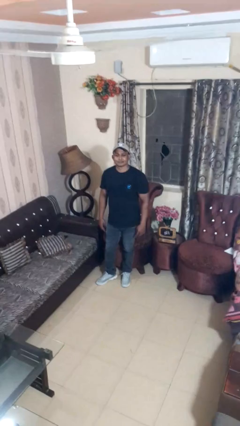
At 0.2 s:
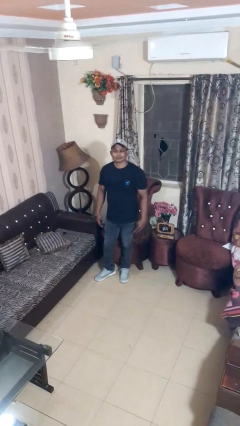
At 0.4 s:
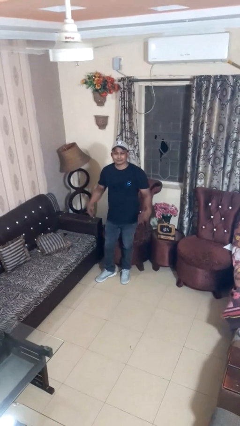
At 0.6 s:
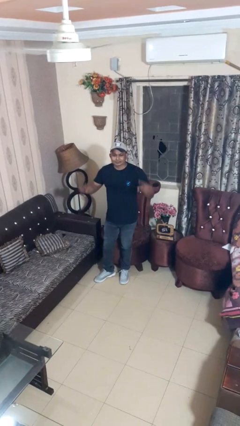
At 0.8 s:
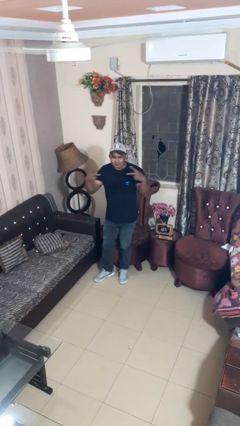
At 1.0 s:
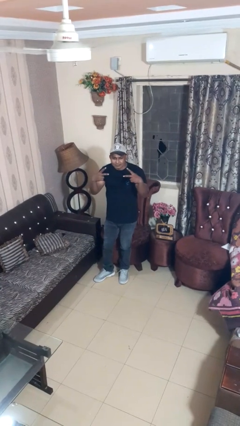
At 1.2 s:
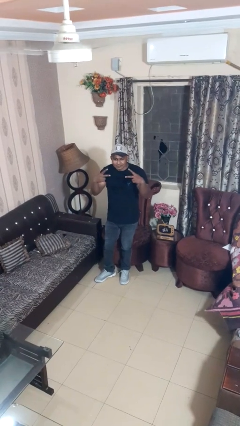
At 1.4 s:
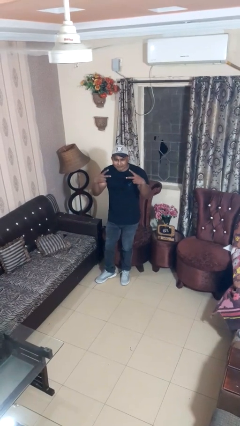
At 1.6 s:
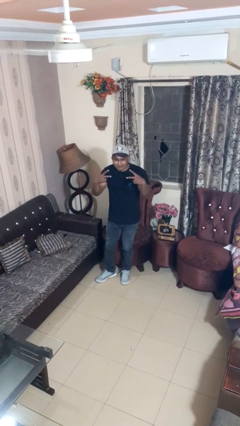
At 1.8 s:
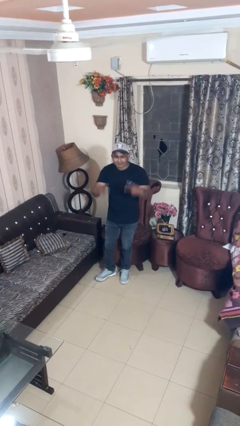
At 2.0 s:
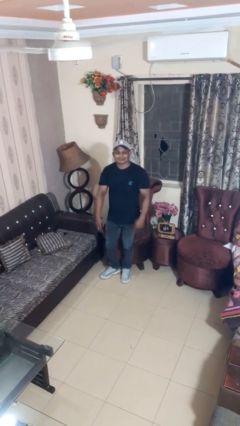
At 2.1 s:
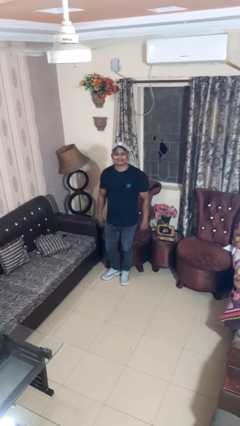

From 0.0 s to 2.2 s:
person gestures peace

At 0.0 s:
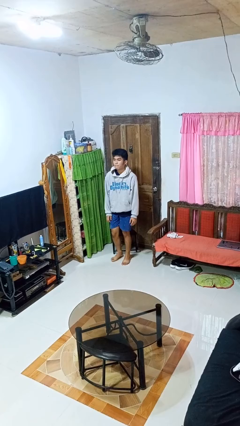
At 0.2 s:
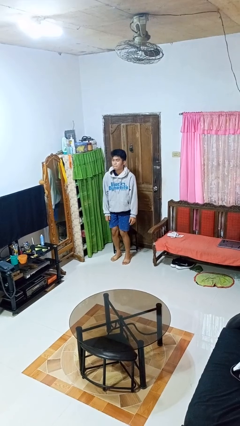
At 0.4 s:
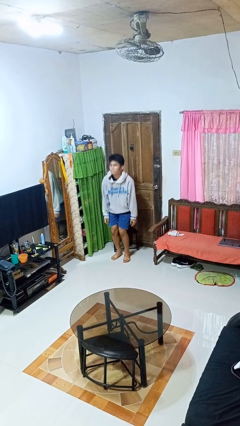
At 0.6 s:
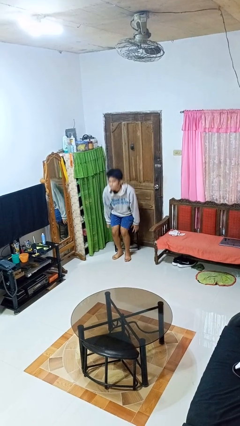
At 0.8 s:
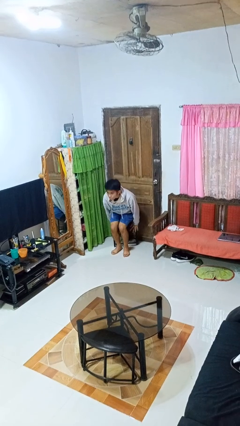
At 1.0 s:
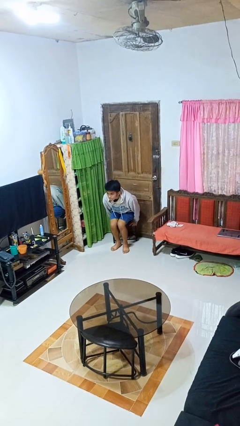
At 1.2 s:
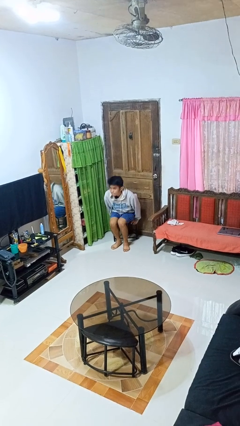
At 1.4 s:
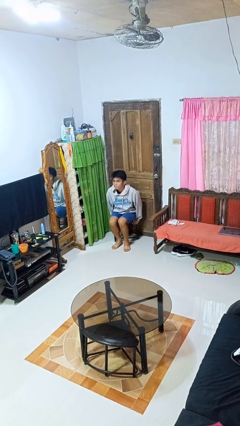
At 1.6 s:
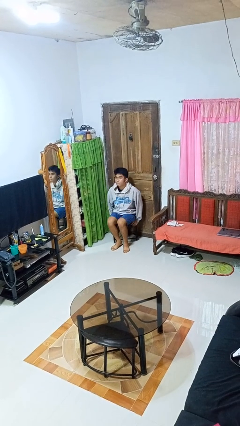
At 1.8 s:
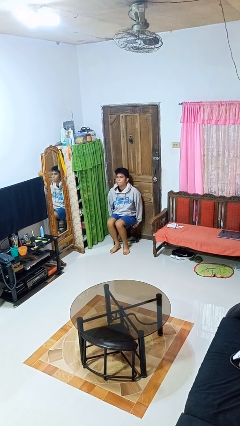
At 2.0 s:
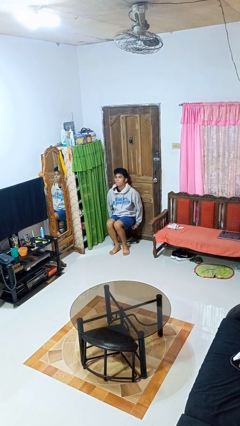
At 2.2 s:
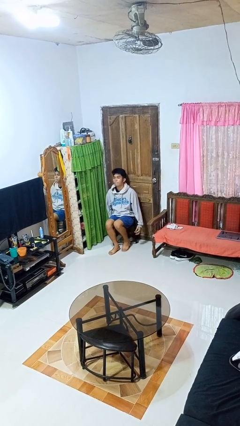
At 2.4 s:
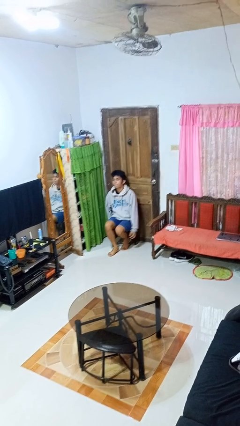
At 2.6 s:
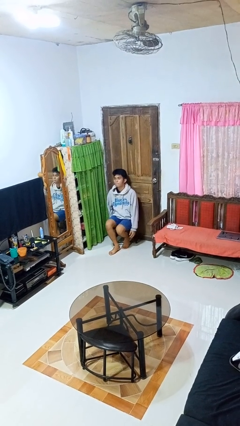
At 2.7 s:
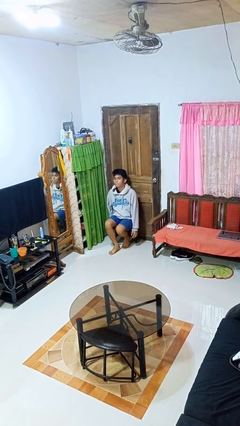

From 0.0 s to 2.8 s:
person sits down

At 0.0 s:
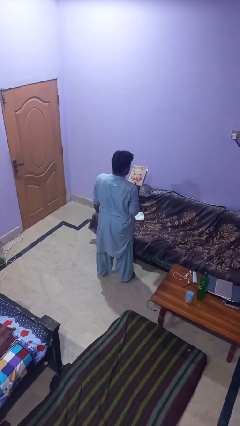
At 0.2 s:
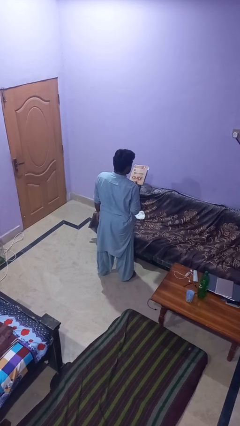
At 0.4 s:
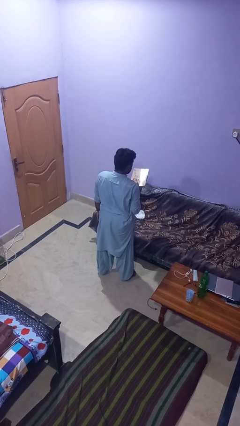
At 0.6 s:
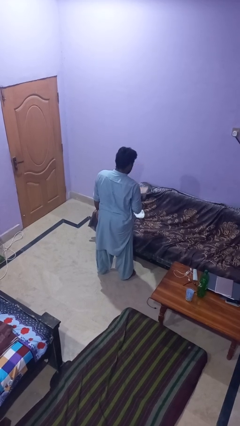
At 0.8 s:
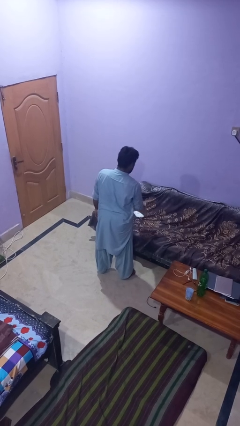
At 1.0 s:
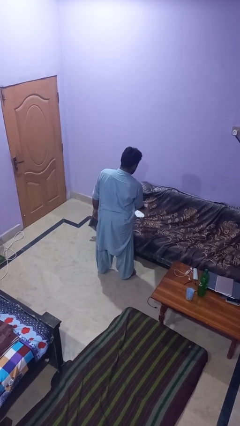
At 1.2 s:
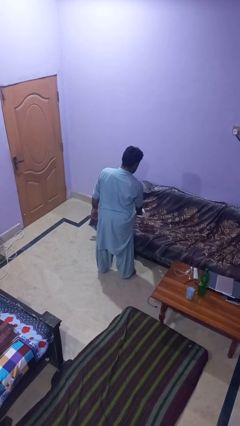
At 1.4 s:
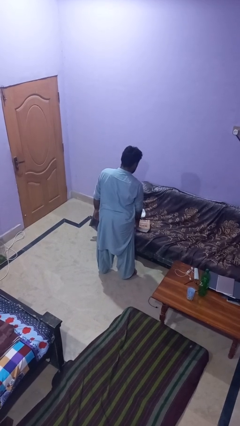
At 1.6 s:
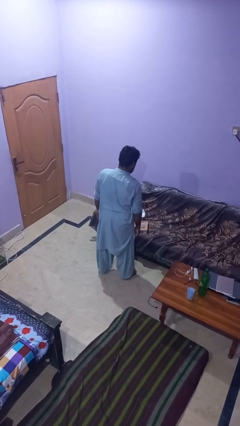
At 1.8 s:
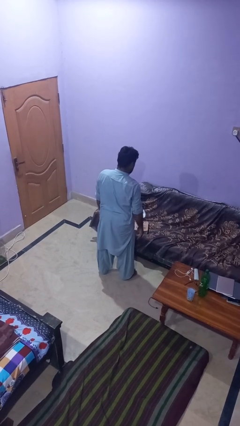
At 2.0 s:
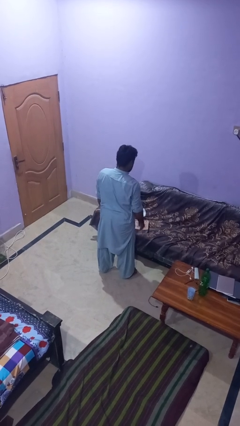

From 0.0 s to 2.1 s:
person puts down object on couch

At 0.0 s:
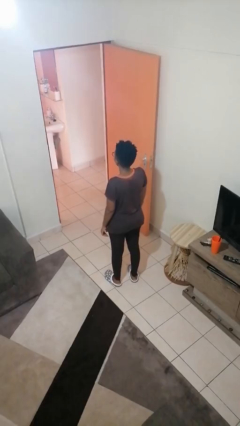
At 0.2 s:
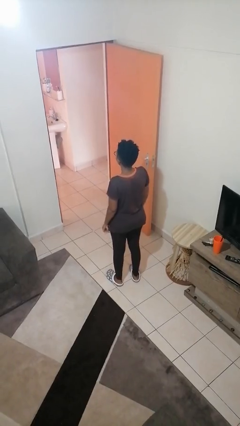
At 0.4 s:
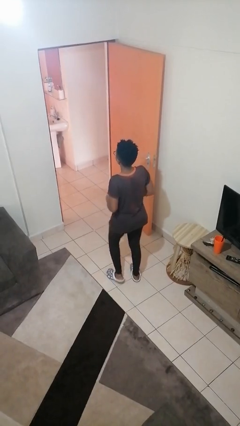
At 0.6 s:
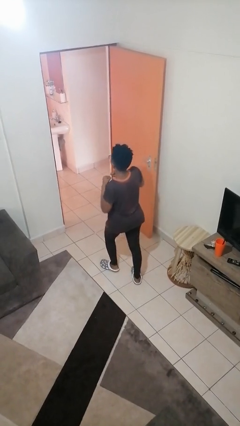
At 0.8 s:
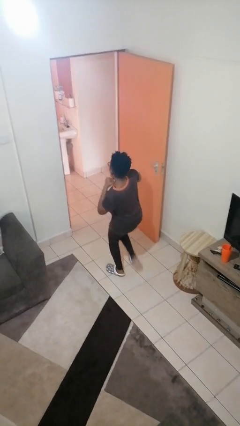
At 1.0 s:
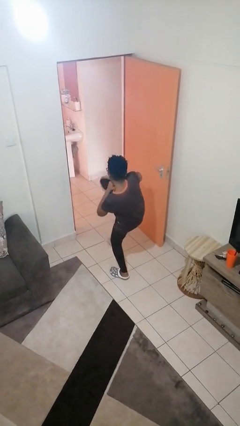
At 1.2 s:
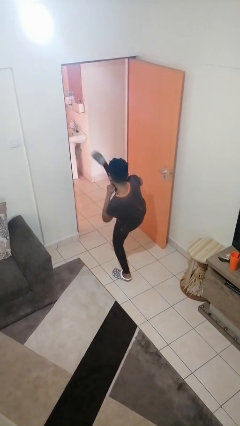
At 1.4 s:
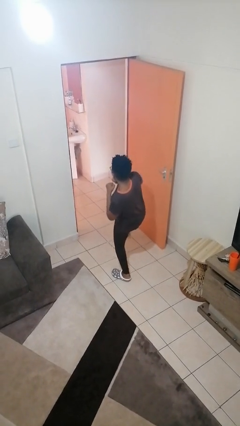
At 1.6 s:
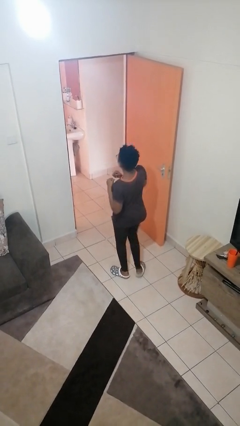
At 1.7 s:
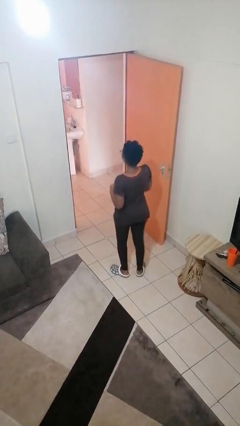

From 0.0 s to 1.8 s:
person karate kicks

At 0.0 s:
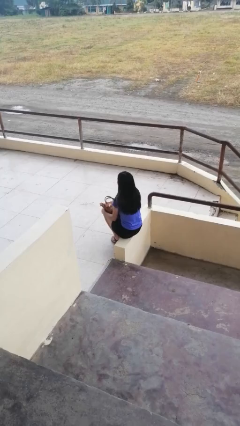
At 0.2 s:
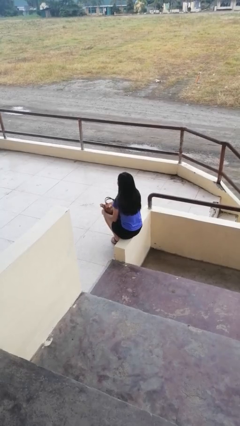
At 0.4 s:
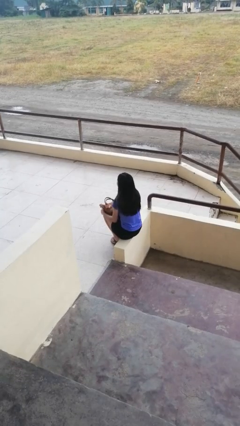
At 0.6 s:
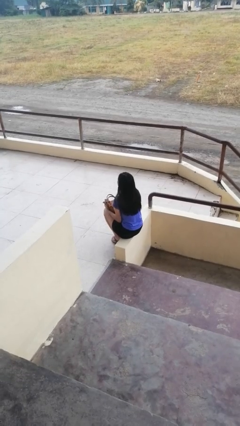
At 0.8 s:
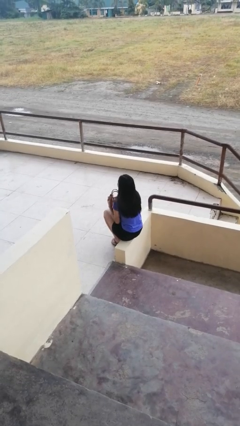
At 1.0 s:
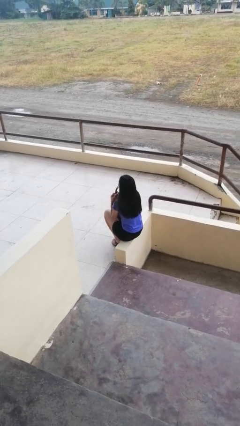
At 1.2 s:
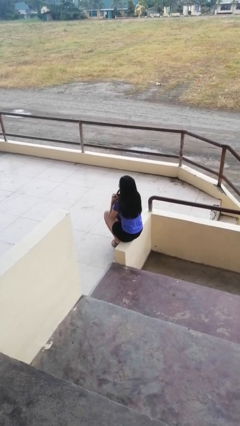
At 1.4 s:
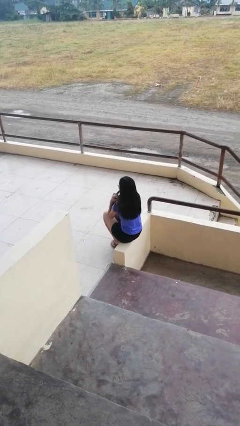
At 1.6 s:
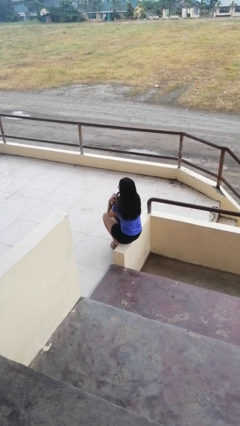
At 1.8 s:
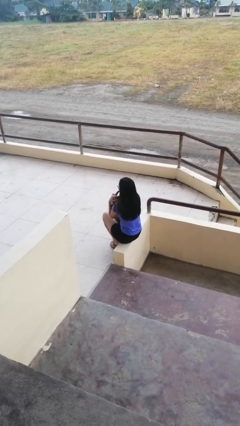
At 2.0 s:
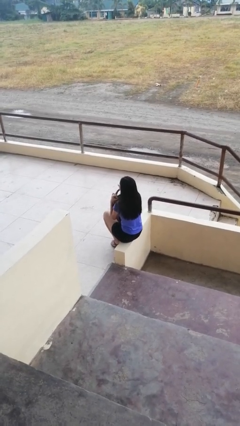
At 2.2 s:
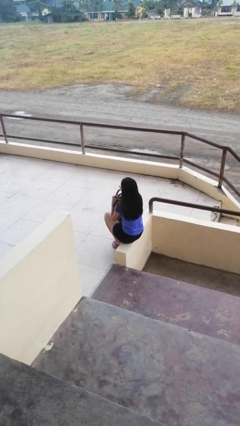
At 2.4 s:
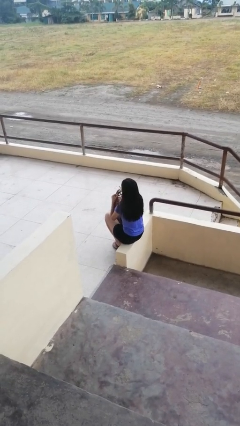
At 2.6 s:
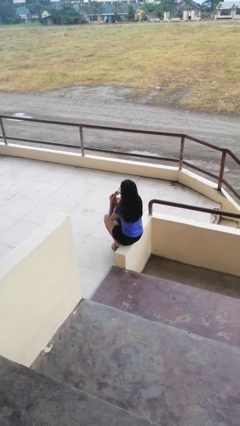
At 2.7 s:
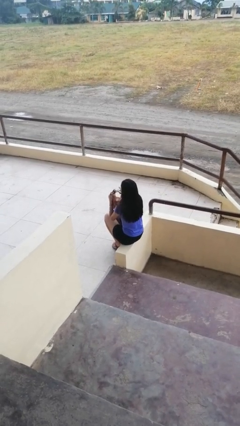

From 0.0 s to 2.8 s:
person squeezes object

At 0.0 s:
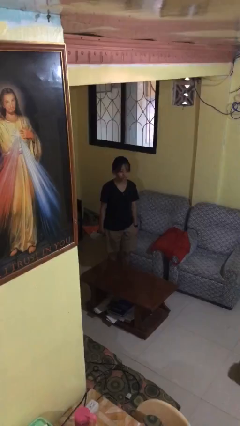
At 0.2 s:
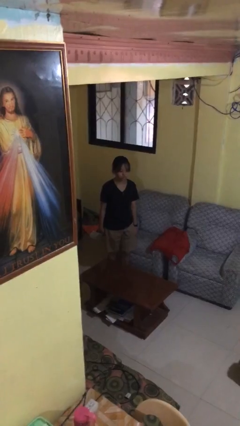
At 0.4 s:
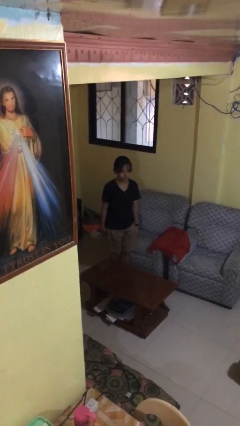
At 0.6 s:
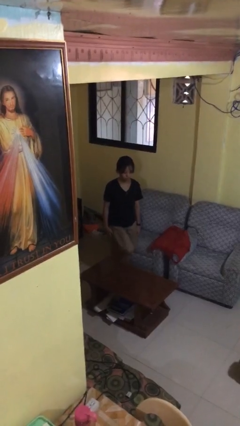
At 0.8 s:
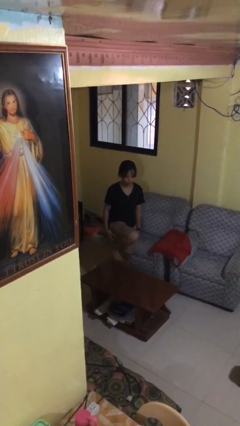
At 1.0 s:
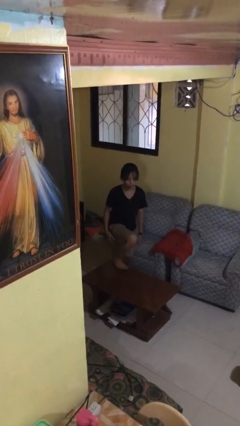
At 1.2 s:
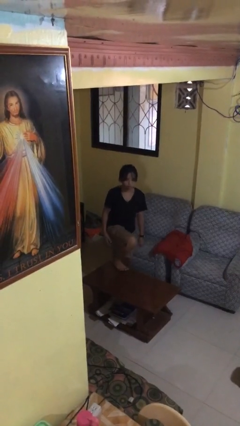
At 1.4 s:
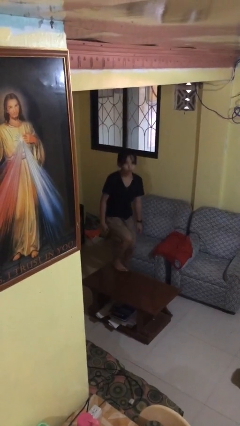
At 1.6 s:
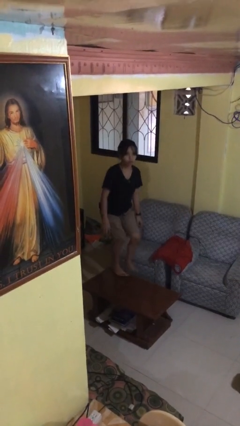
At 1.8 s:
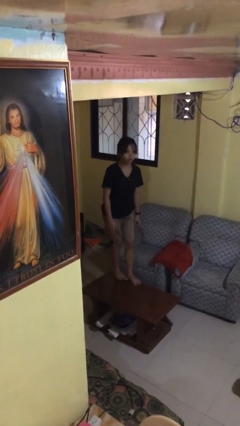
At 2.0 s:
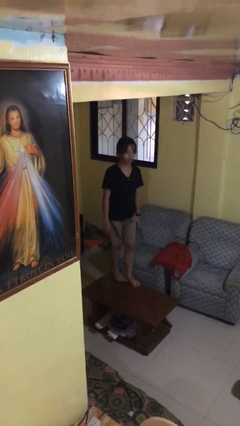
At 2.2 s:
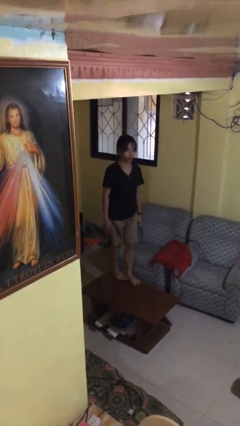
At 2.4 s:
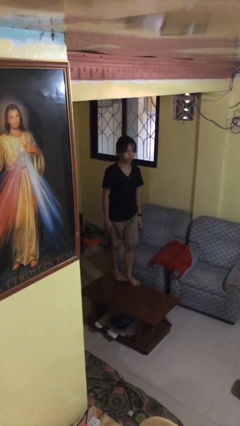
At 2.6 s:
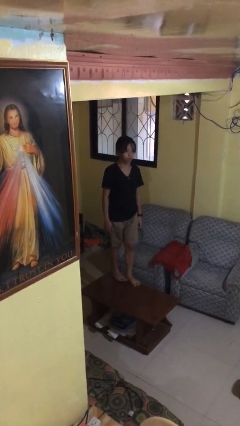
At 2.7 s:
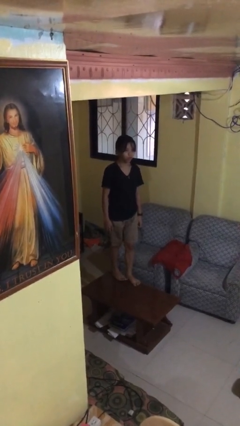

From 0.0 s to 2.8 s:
person climbs on table

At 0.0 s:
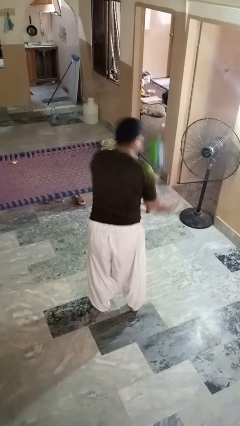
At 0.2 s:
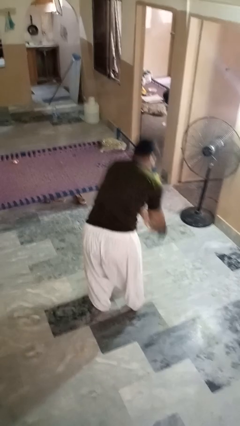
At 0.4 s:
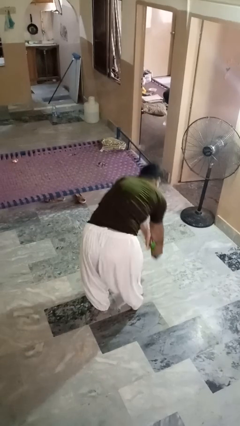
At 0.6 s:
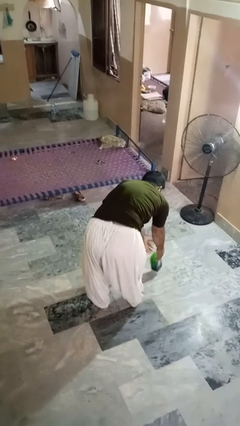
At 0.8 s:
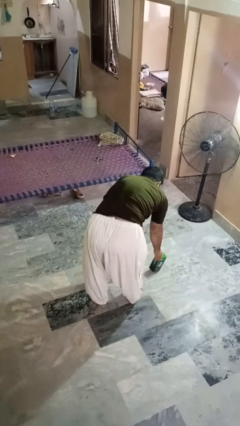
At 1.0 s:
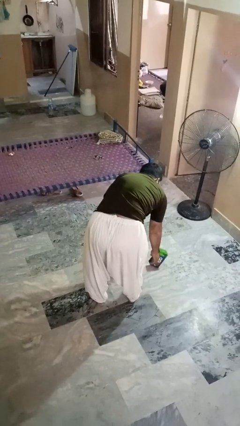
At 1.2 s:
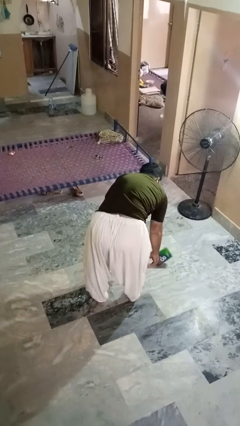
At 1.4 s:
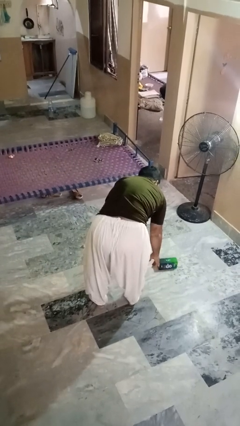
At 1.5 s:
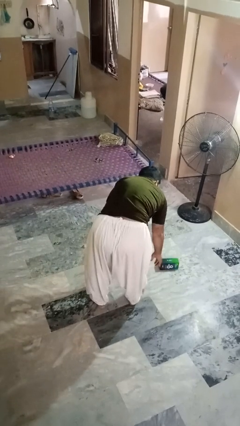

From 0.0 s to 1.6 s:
person catches dropped object

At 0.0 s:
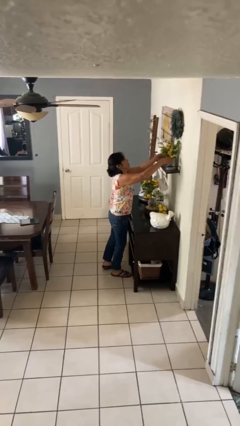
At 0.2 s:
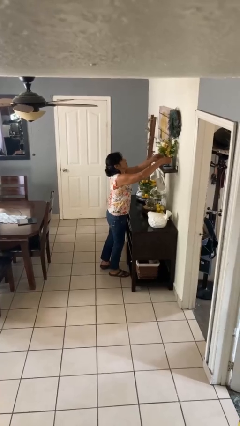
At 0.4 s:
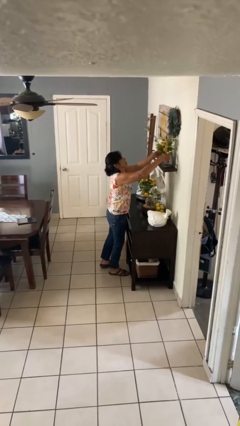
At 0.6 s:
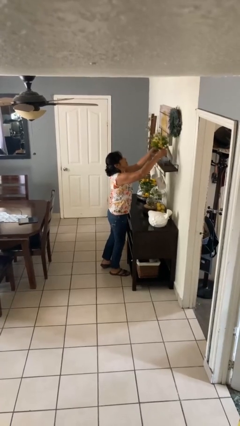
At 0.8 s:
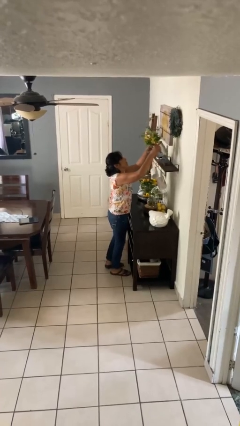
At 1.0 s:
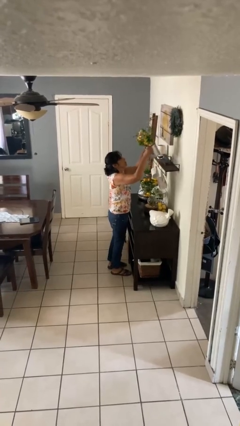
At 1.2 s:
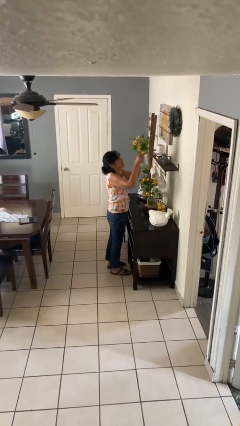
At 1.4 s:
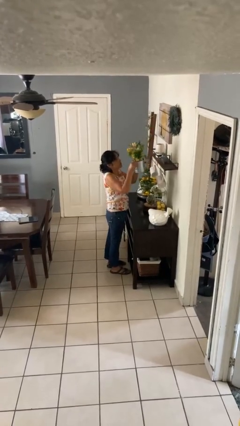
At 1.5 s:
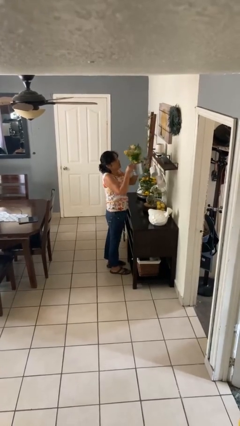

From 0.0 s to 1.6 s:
person picks up object from countertop
